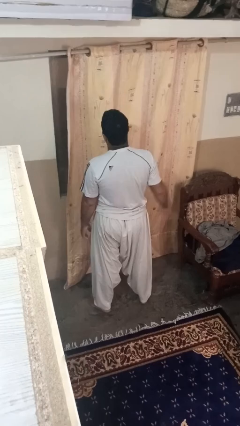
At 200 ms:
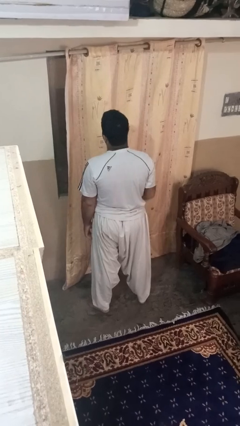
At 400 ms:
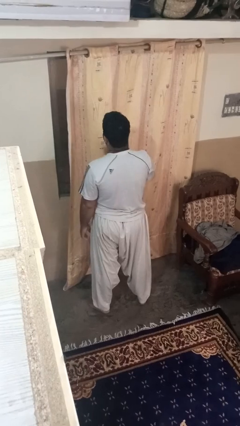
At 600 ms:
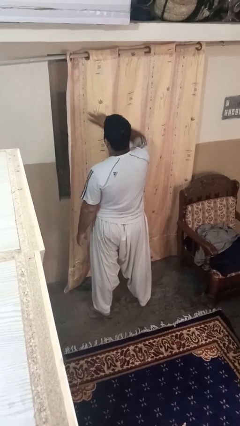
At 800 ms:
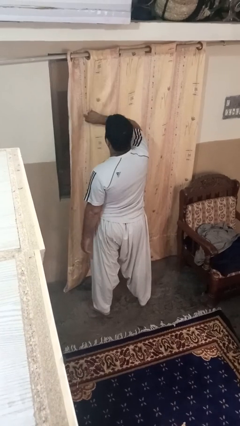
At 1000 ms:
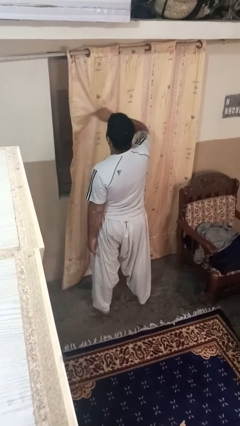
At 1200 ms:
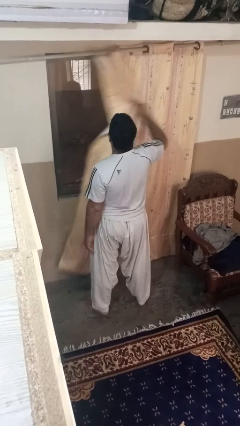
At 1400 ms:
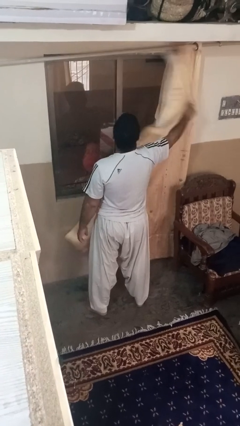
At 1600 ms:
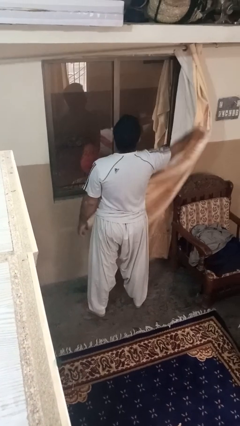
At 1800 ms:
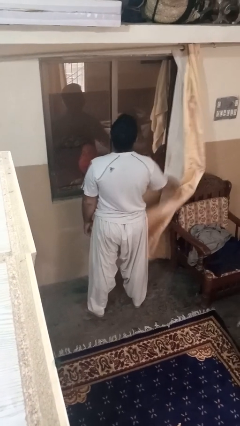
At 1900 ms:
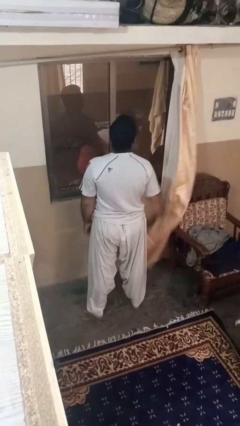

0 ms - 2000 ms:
person opens curtains

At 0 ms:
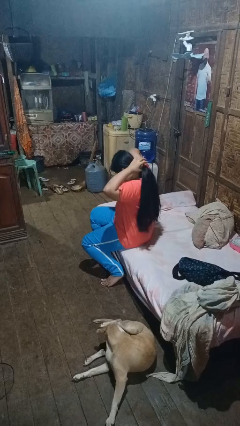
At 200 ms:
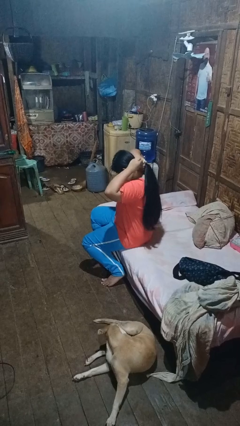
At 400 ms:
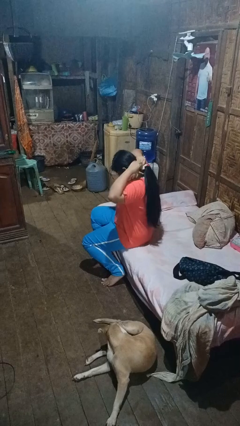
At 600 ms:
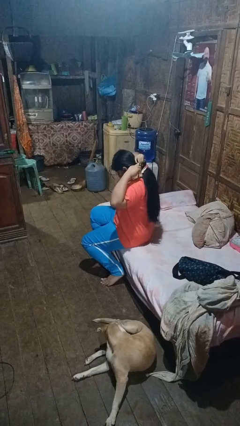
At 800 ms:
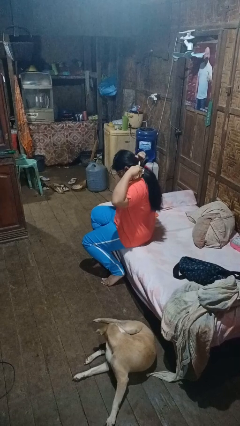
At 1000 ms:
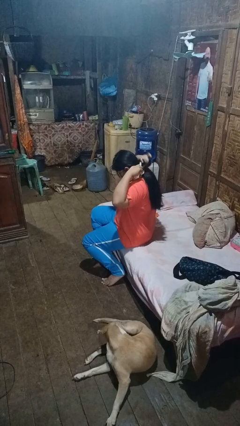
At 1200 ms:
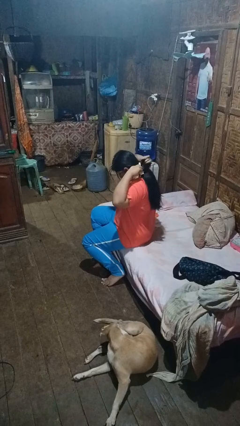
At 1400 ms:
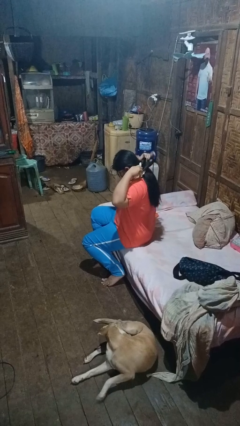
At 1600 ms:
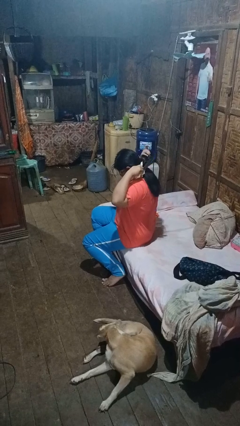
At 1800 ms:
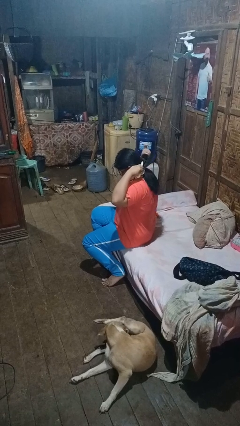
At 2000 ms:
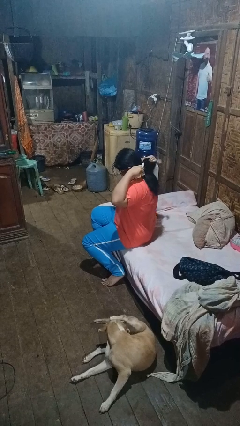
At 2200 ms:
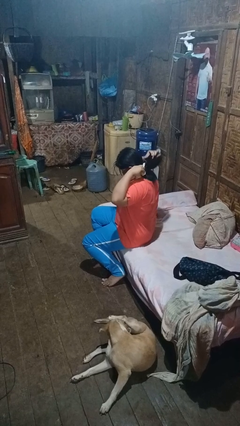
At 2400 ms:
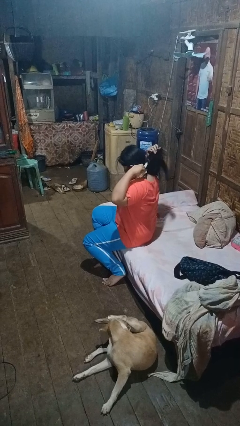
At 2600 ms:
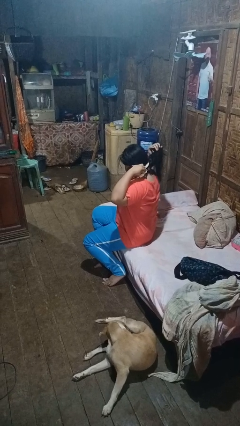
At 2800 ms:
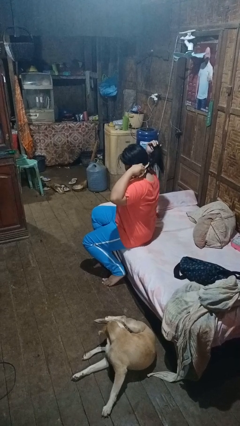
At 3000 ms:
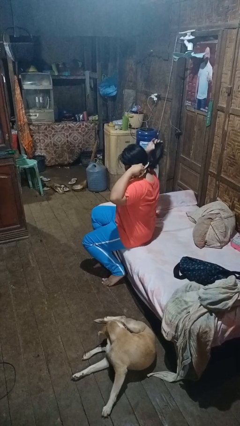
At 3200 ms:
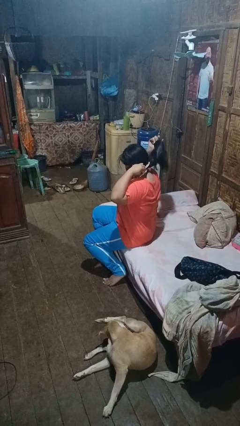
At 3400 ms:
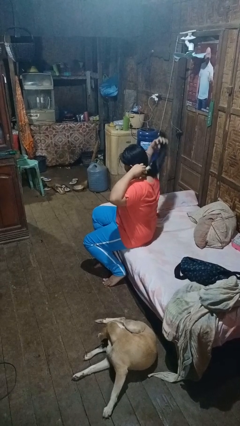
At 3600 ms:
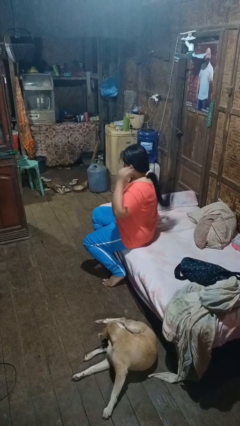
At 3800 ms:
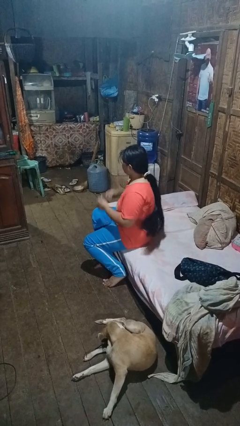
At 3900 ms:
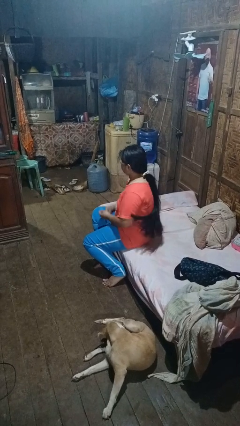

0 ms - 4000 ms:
person puts hair in ponytail

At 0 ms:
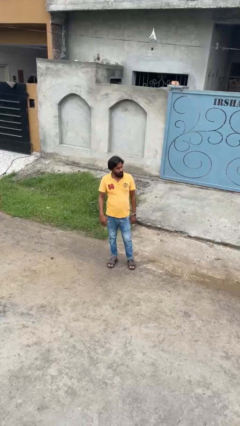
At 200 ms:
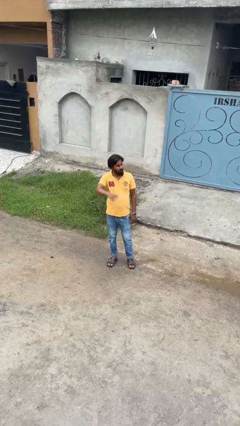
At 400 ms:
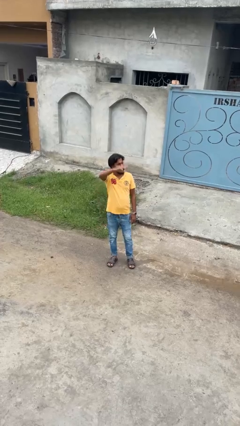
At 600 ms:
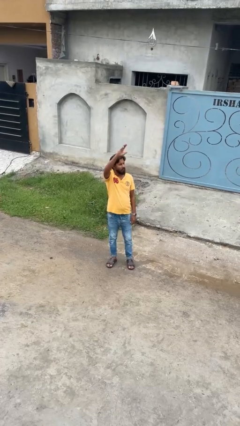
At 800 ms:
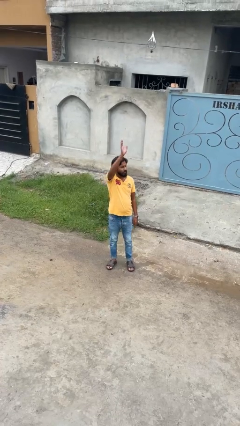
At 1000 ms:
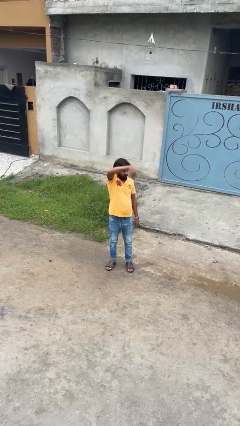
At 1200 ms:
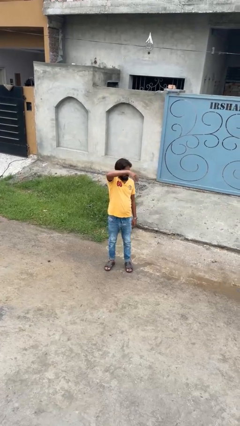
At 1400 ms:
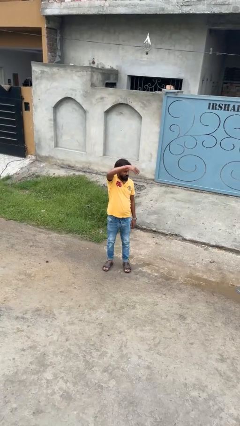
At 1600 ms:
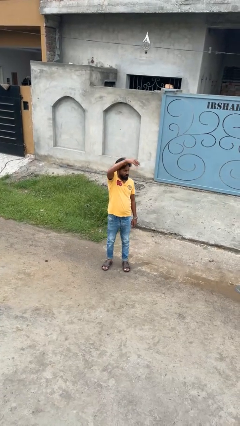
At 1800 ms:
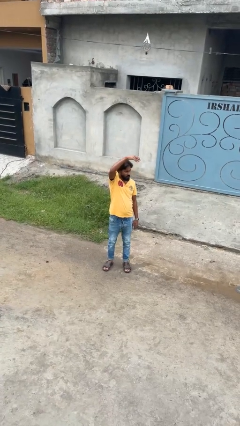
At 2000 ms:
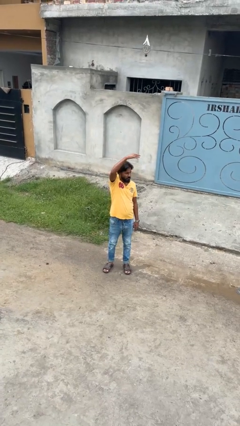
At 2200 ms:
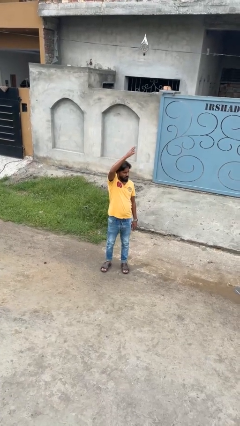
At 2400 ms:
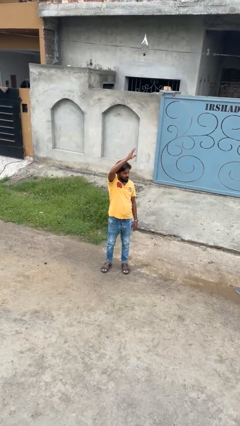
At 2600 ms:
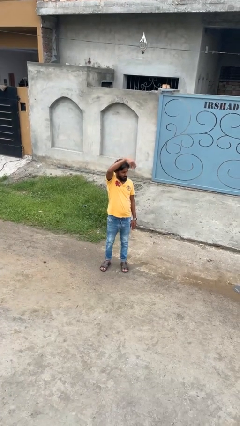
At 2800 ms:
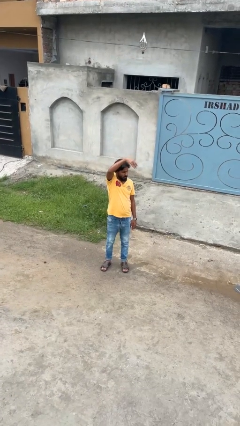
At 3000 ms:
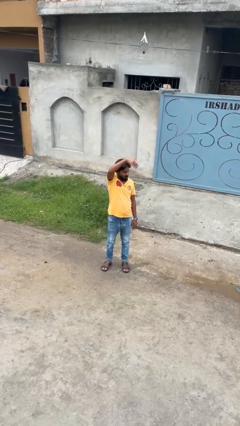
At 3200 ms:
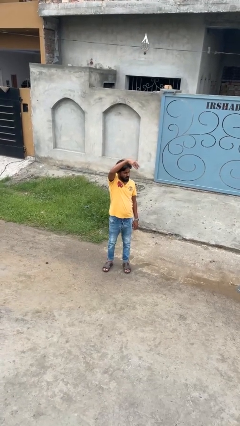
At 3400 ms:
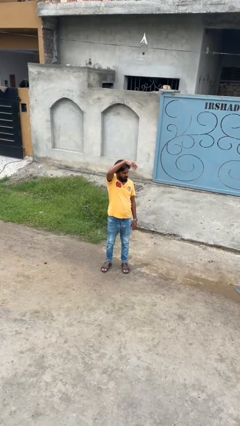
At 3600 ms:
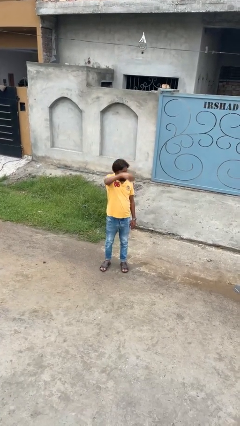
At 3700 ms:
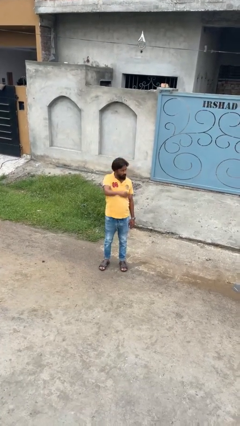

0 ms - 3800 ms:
person gestures come here

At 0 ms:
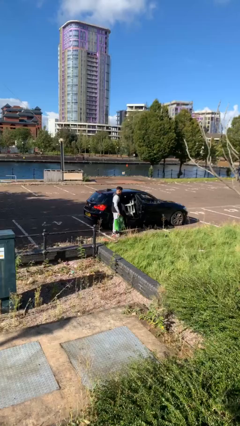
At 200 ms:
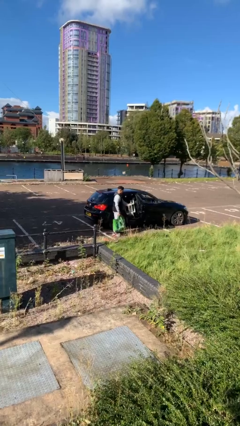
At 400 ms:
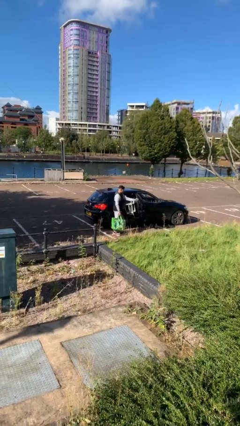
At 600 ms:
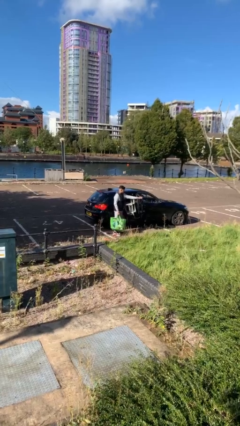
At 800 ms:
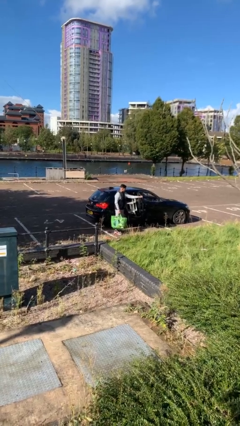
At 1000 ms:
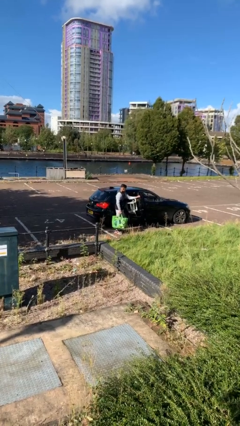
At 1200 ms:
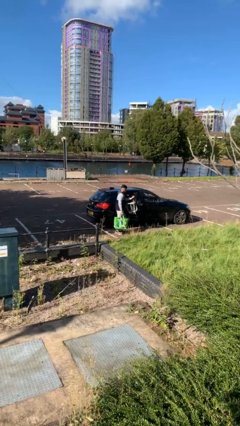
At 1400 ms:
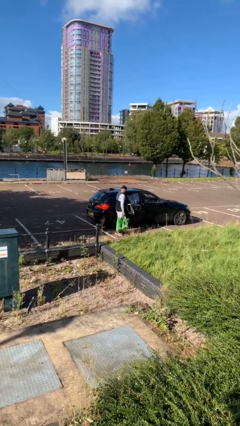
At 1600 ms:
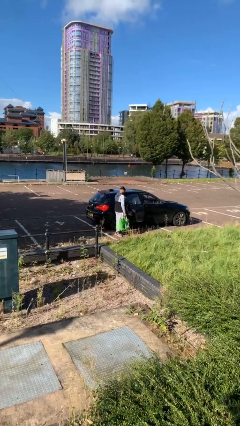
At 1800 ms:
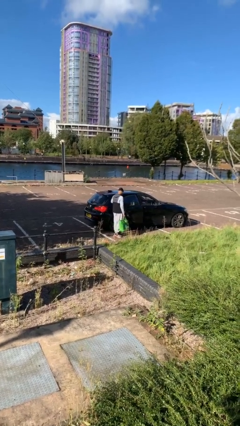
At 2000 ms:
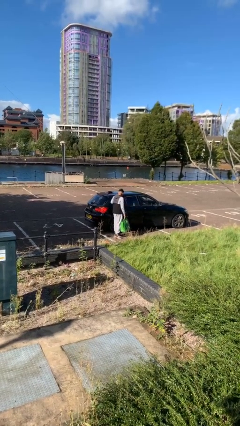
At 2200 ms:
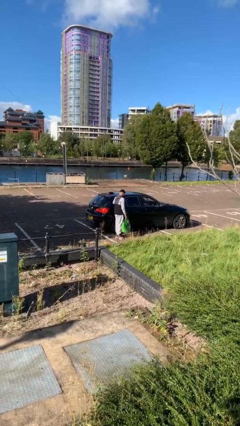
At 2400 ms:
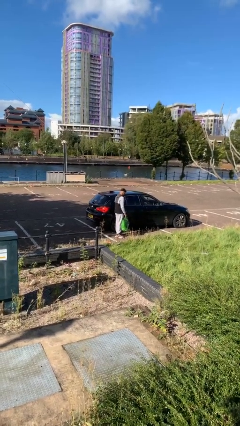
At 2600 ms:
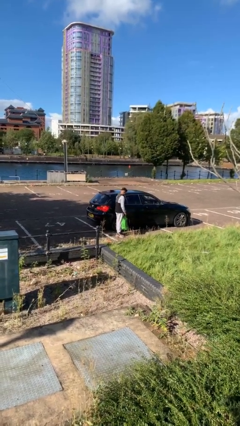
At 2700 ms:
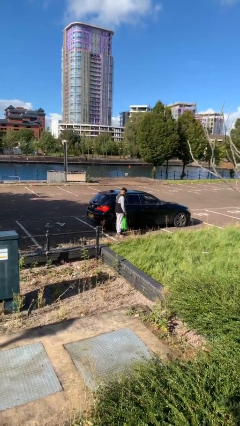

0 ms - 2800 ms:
person closes car door

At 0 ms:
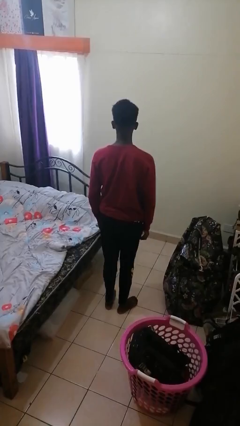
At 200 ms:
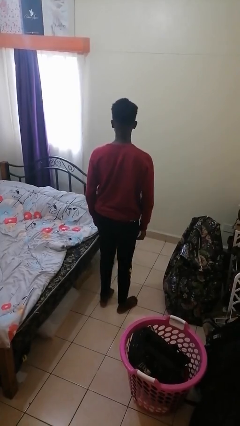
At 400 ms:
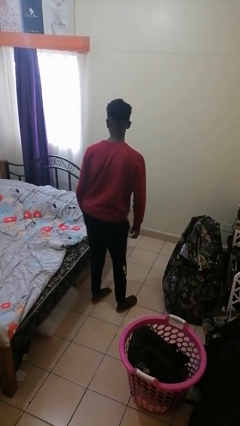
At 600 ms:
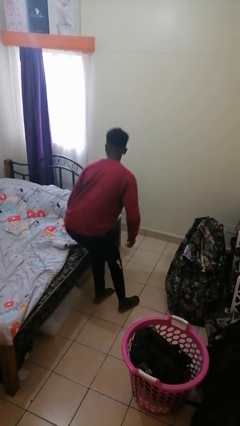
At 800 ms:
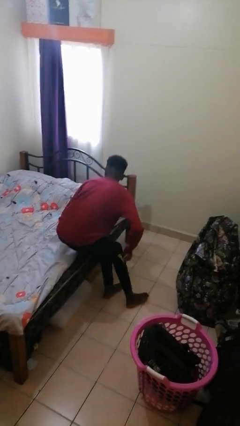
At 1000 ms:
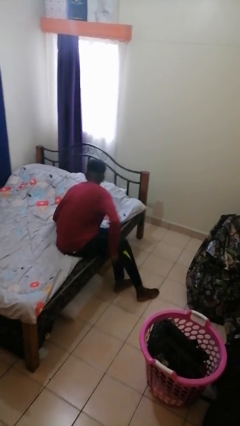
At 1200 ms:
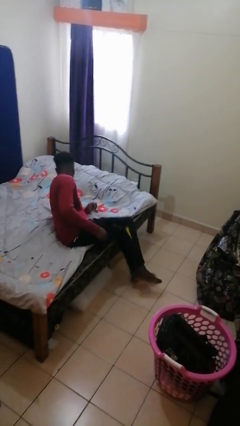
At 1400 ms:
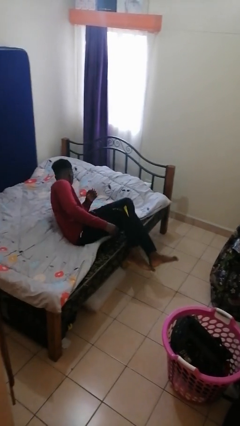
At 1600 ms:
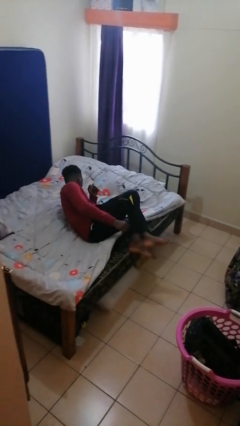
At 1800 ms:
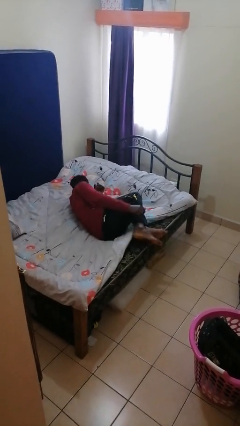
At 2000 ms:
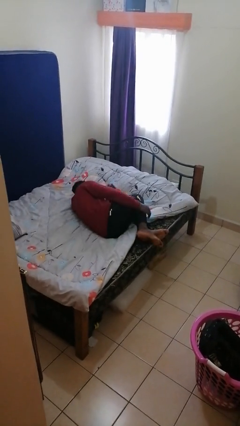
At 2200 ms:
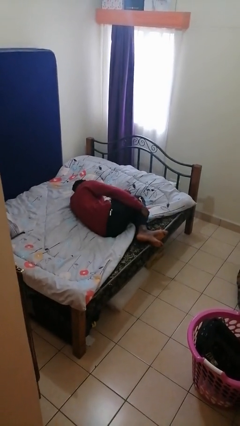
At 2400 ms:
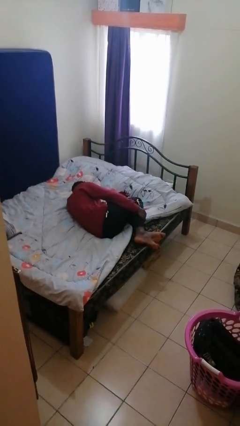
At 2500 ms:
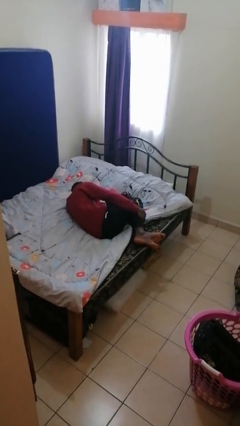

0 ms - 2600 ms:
person lies down on bed

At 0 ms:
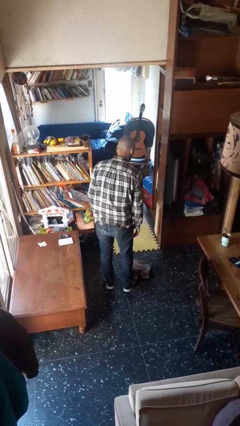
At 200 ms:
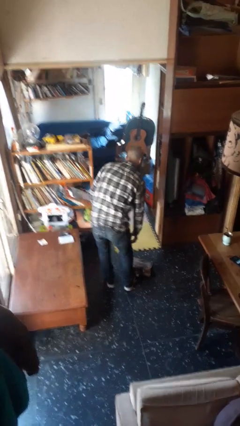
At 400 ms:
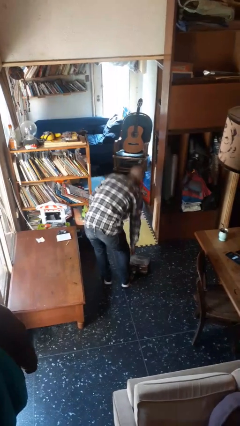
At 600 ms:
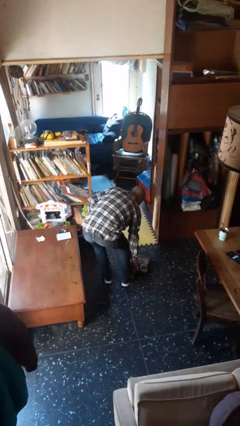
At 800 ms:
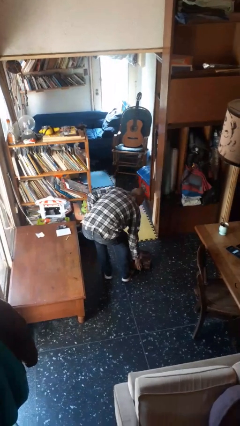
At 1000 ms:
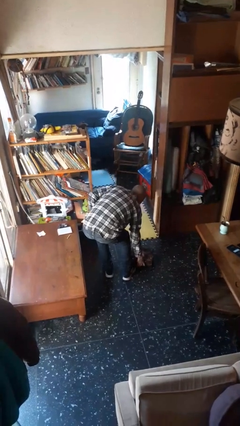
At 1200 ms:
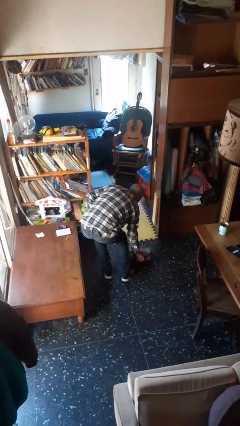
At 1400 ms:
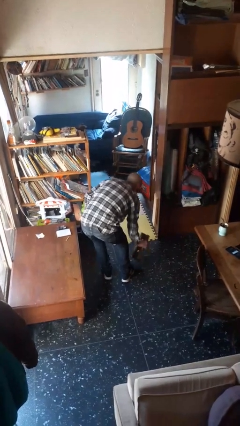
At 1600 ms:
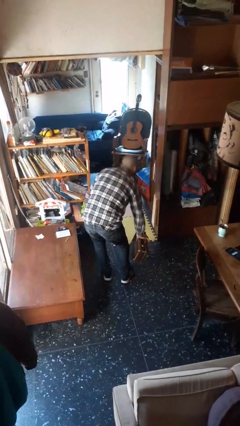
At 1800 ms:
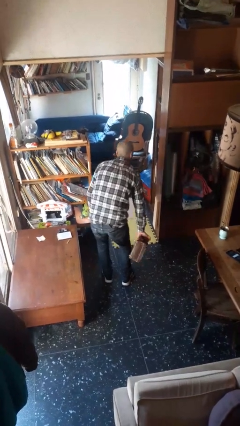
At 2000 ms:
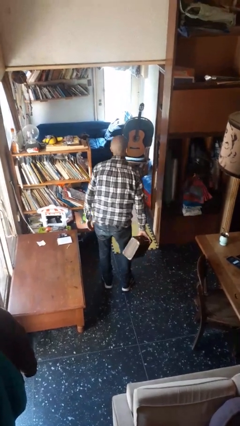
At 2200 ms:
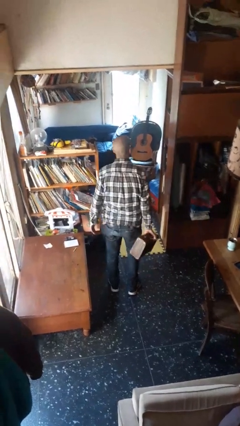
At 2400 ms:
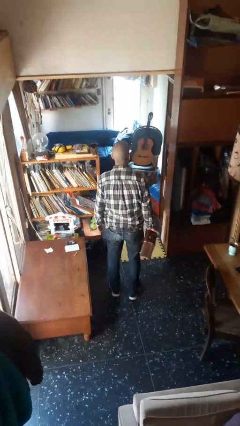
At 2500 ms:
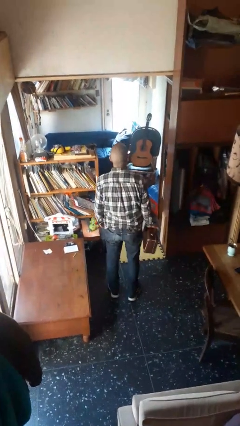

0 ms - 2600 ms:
person picks up object from floor
